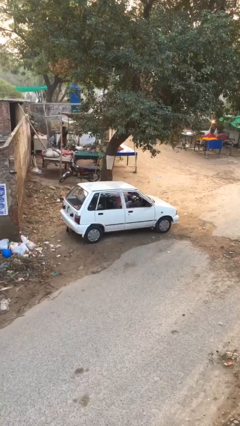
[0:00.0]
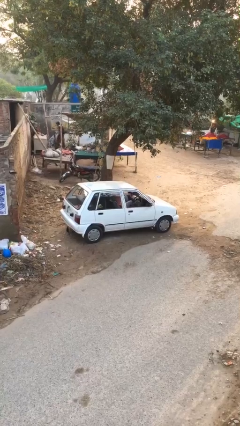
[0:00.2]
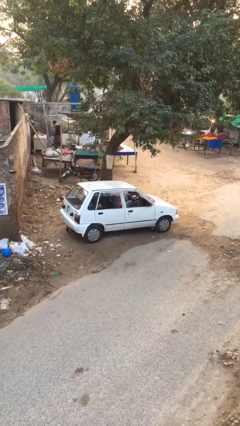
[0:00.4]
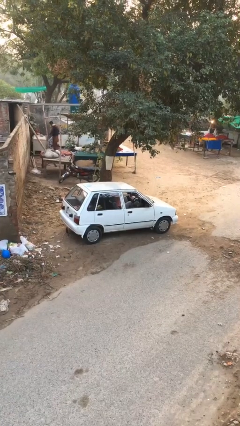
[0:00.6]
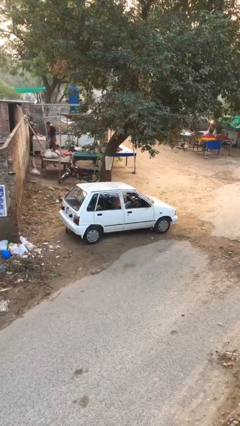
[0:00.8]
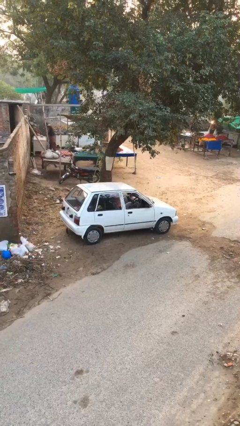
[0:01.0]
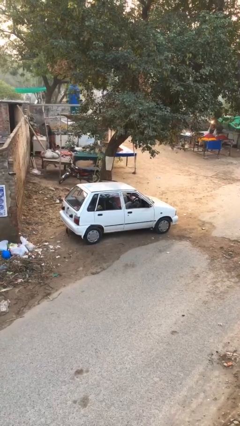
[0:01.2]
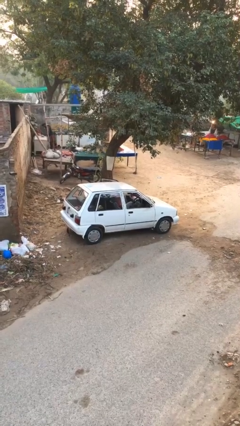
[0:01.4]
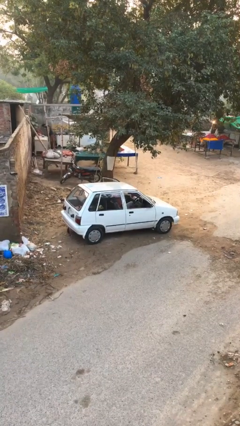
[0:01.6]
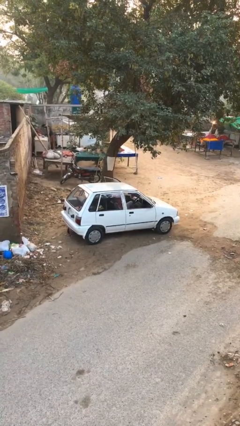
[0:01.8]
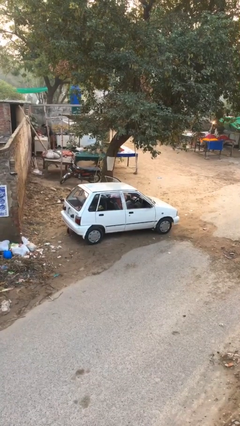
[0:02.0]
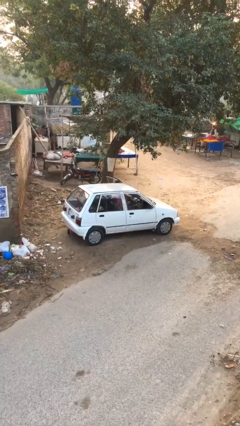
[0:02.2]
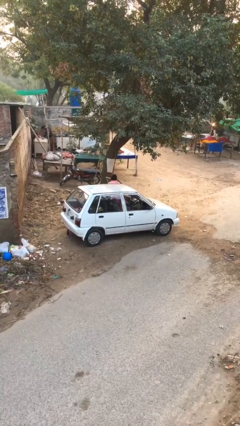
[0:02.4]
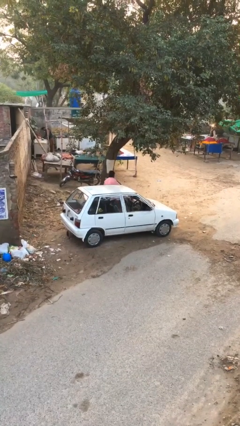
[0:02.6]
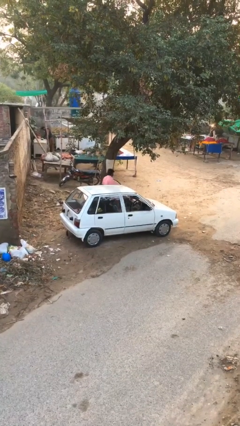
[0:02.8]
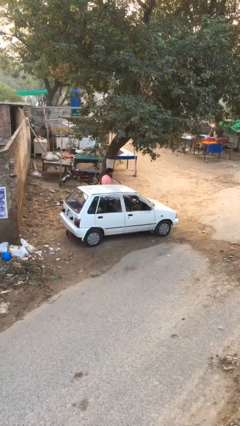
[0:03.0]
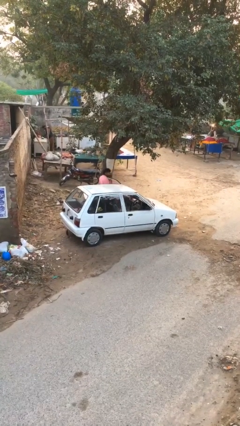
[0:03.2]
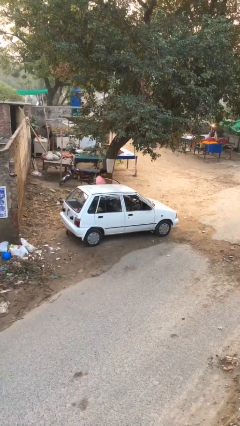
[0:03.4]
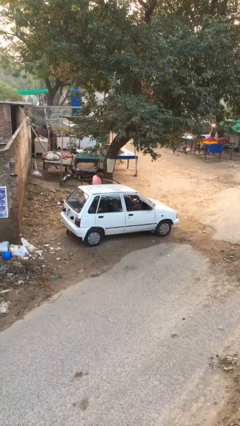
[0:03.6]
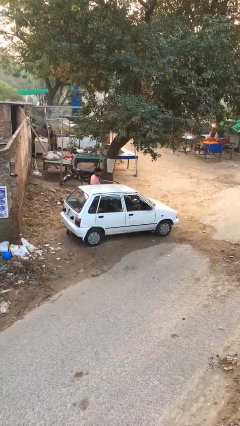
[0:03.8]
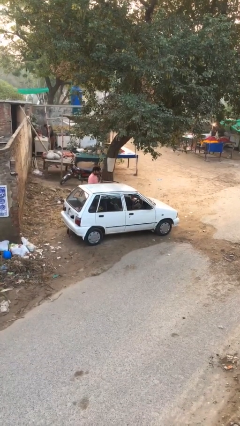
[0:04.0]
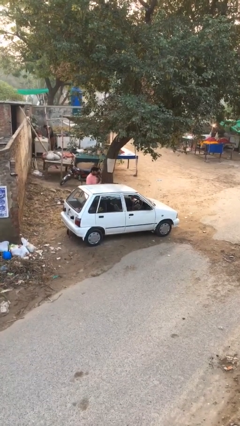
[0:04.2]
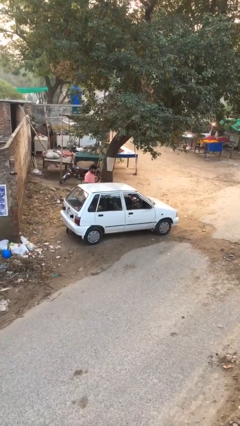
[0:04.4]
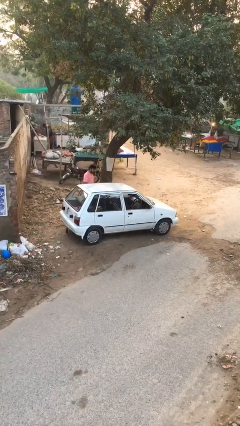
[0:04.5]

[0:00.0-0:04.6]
car drops off person

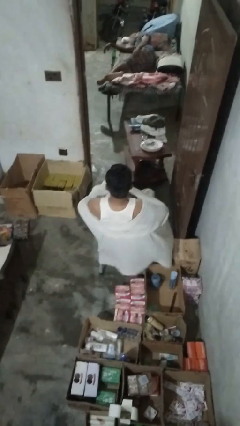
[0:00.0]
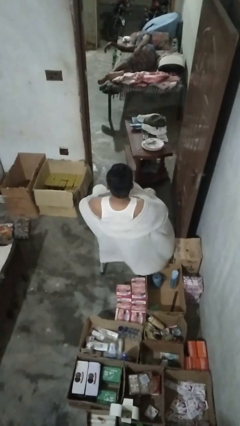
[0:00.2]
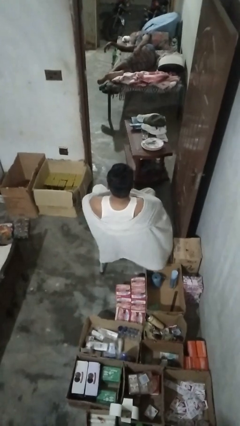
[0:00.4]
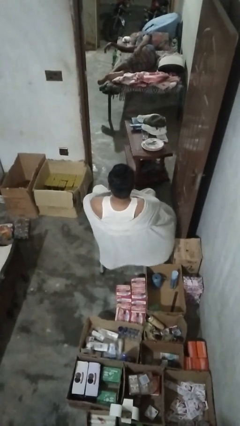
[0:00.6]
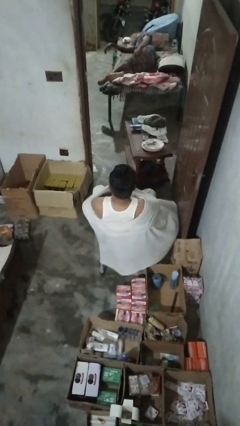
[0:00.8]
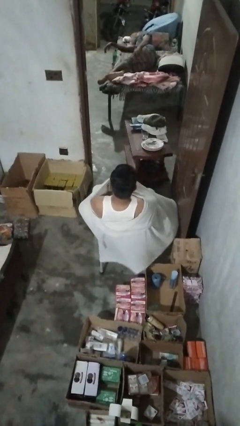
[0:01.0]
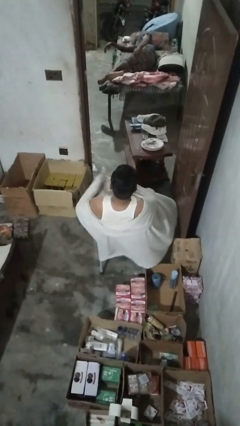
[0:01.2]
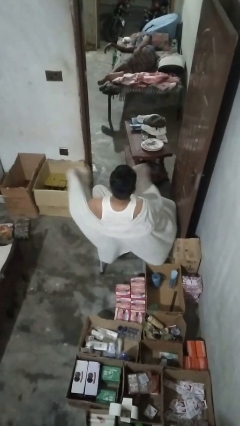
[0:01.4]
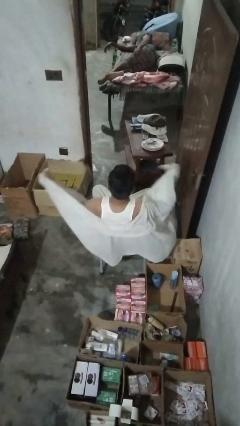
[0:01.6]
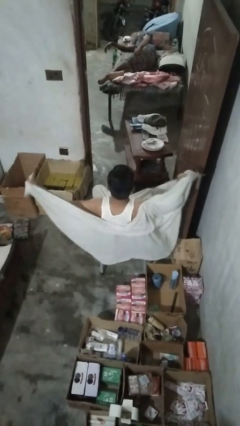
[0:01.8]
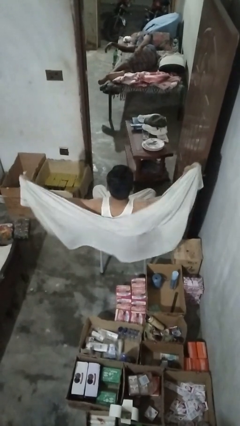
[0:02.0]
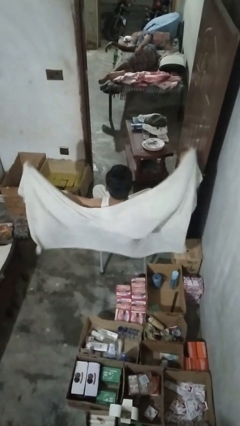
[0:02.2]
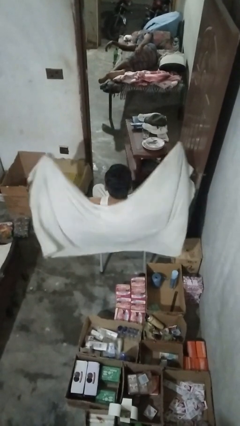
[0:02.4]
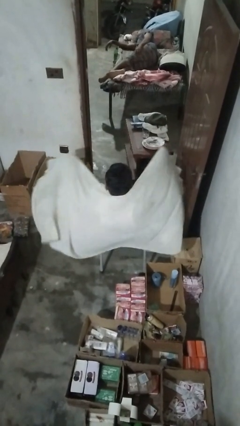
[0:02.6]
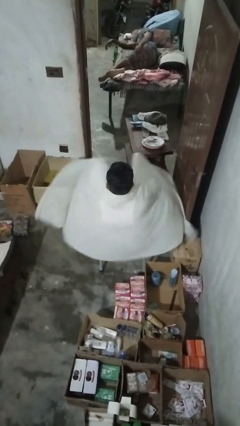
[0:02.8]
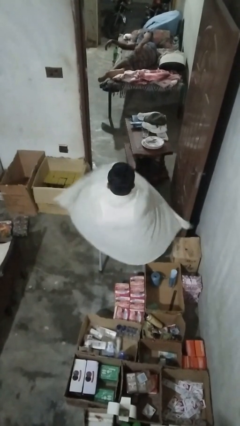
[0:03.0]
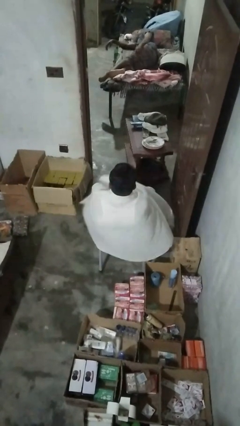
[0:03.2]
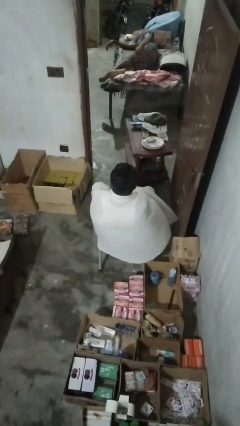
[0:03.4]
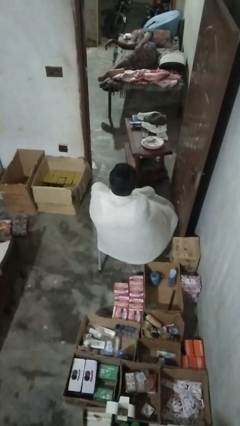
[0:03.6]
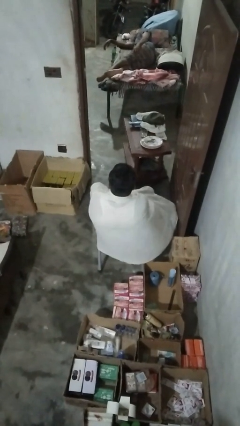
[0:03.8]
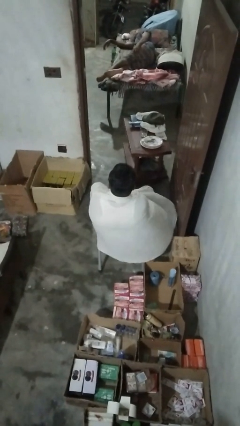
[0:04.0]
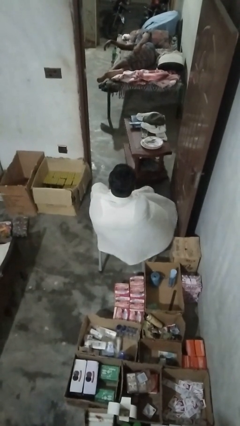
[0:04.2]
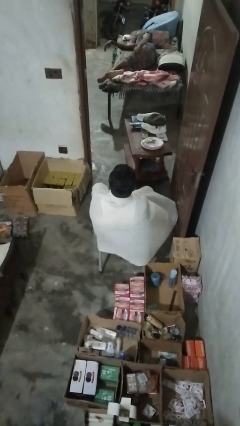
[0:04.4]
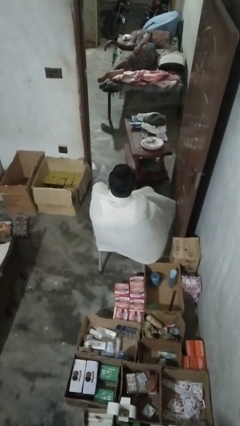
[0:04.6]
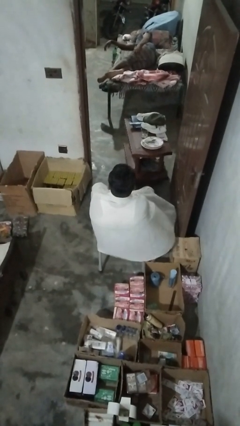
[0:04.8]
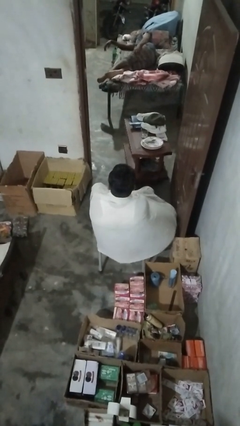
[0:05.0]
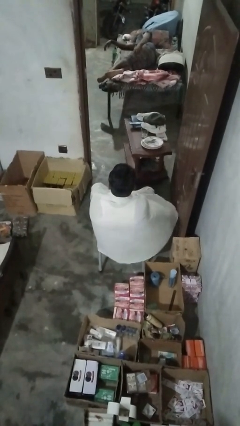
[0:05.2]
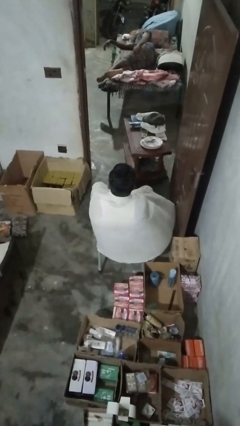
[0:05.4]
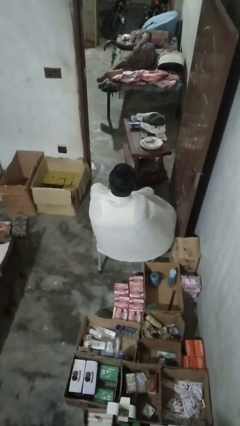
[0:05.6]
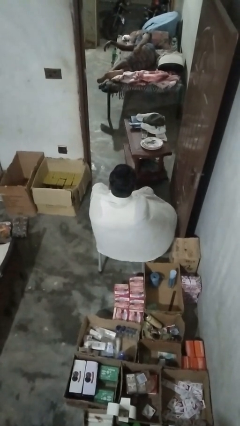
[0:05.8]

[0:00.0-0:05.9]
person covers with blanket

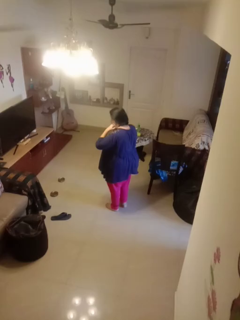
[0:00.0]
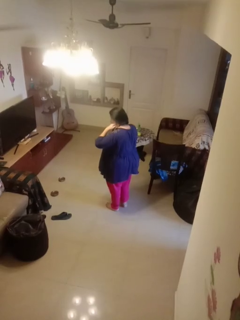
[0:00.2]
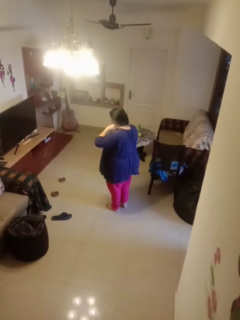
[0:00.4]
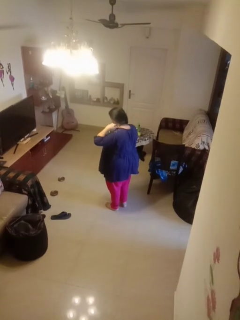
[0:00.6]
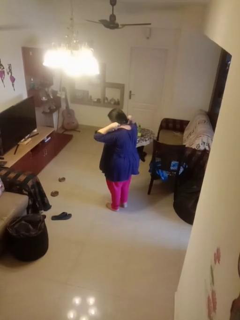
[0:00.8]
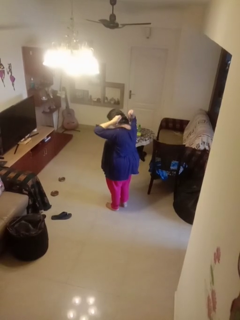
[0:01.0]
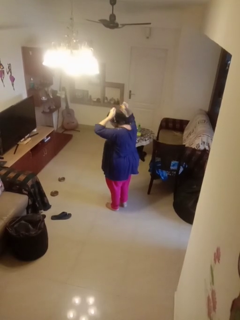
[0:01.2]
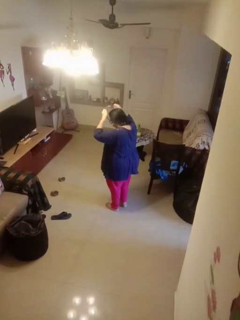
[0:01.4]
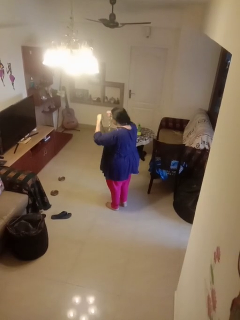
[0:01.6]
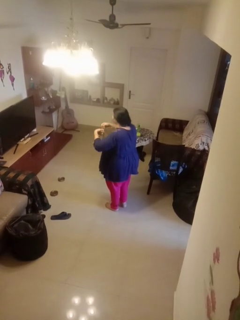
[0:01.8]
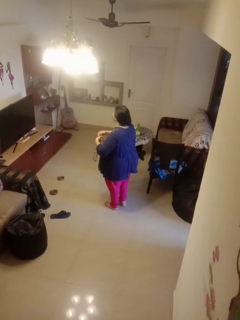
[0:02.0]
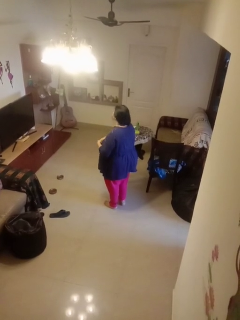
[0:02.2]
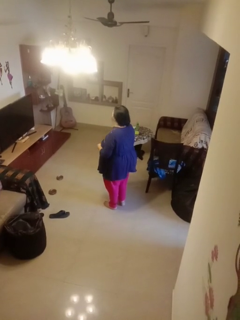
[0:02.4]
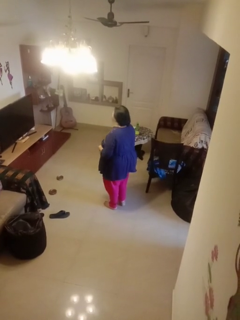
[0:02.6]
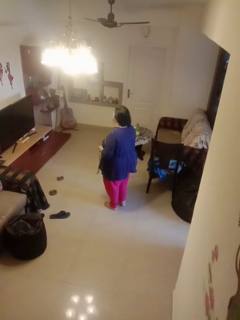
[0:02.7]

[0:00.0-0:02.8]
person takes off necklace

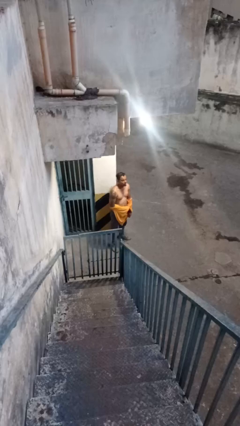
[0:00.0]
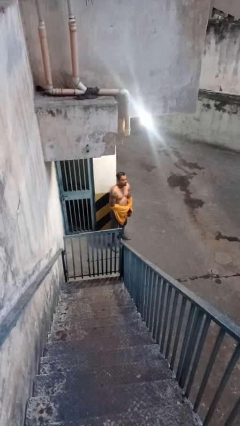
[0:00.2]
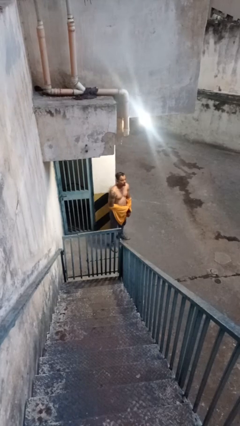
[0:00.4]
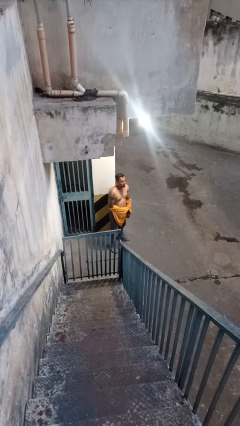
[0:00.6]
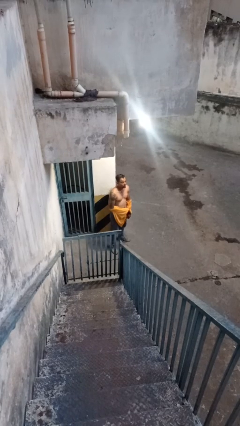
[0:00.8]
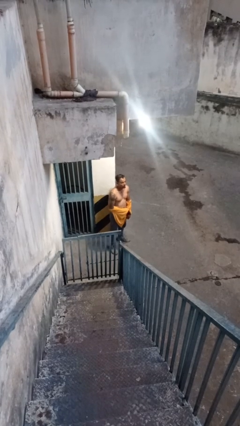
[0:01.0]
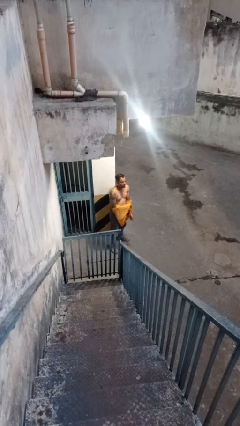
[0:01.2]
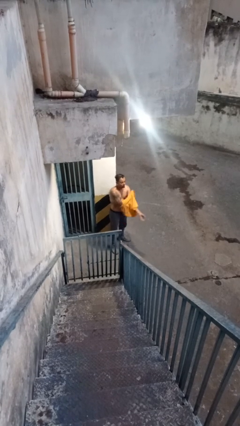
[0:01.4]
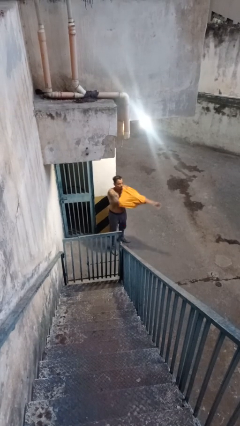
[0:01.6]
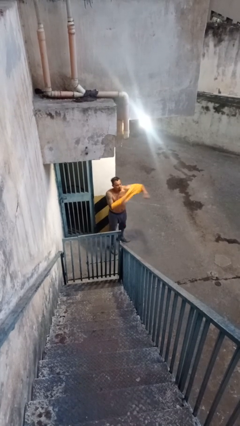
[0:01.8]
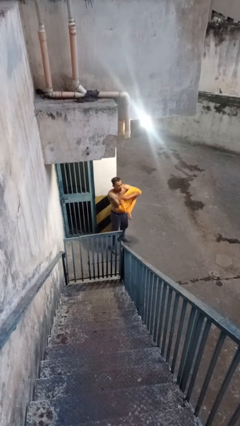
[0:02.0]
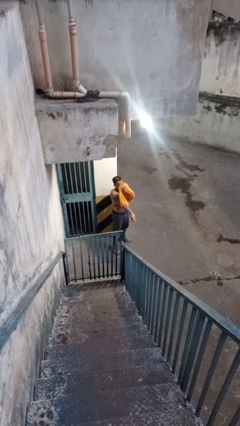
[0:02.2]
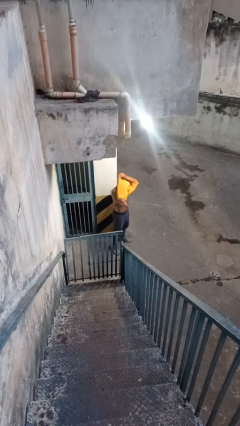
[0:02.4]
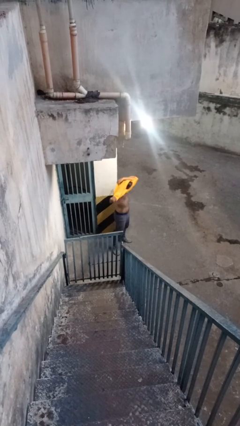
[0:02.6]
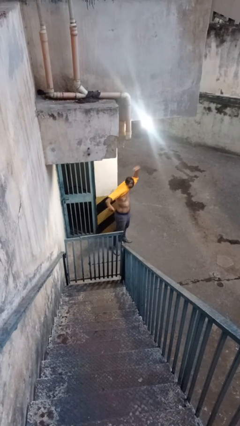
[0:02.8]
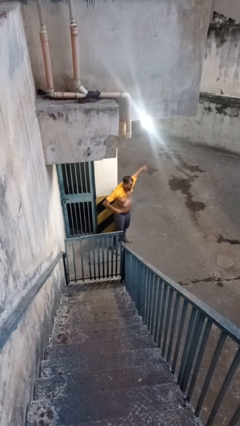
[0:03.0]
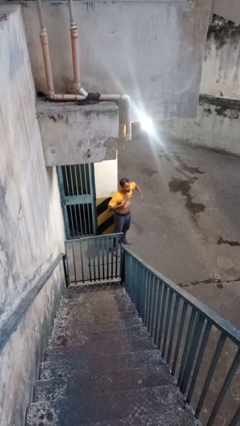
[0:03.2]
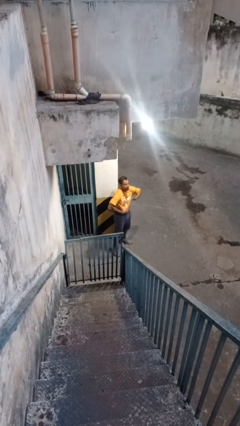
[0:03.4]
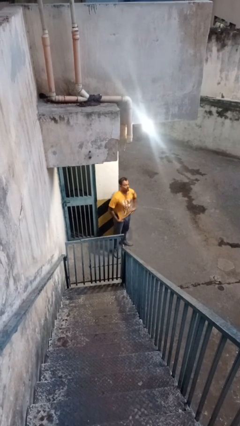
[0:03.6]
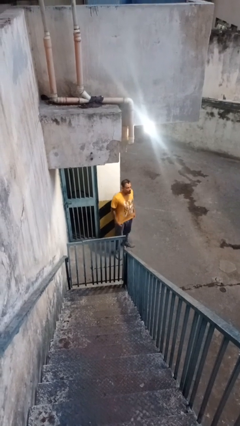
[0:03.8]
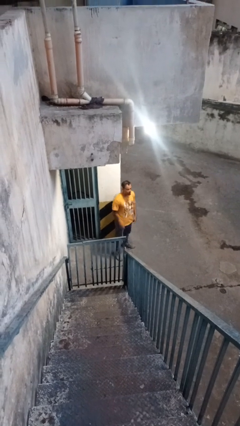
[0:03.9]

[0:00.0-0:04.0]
person tucks in shirt

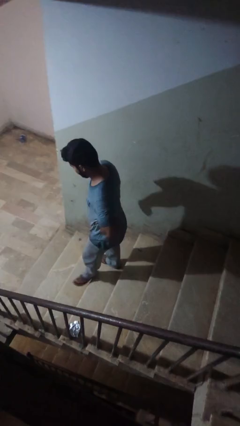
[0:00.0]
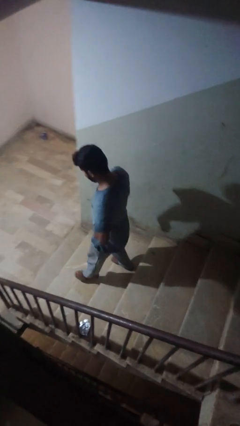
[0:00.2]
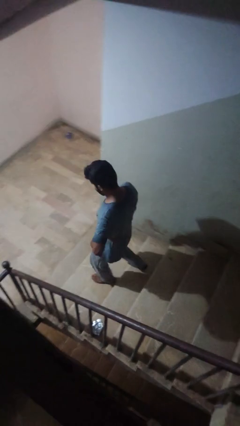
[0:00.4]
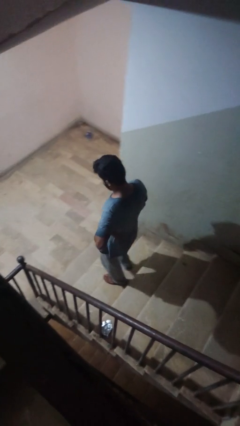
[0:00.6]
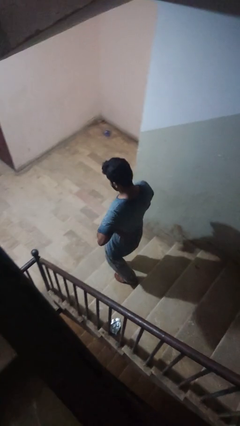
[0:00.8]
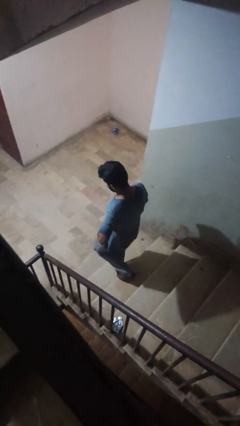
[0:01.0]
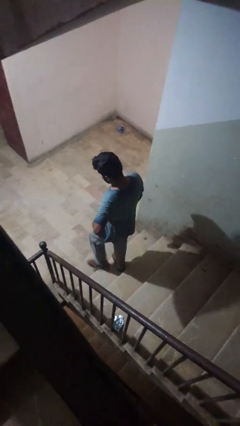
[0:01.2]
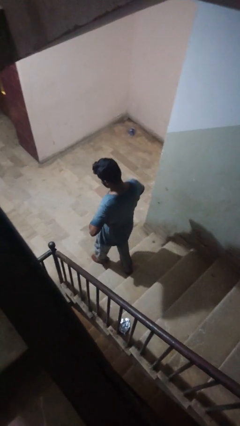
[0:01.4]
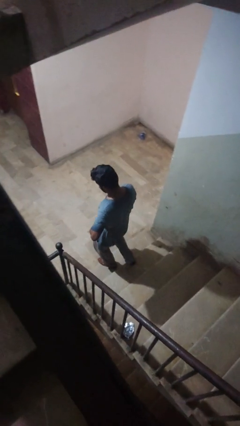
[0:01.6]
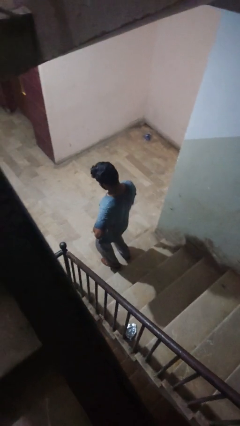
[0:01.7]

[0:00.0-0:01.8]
person climbs down stairs
